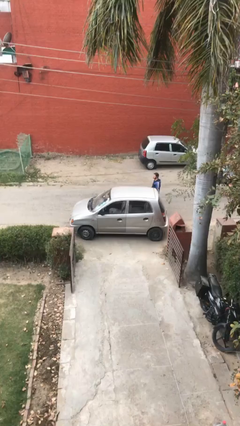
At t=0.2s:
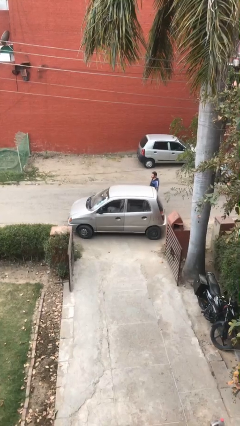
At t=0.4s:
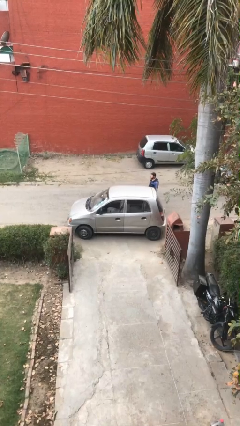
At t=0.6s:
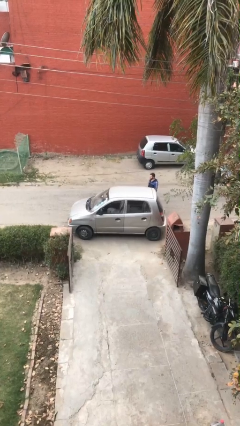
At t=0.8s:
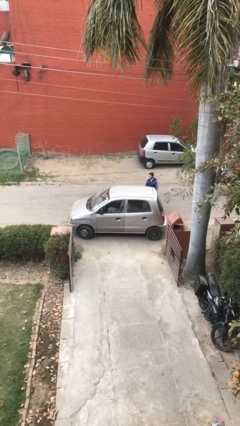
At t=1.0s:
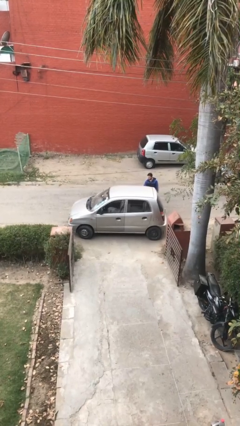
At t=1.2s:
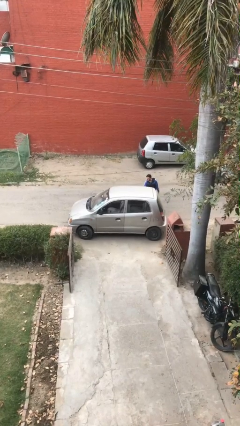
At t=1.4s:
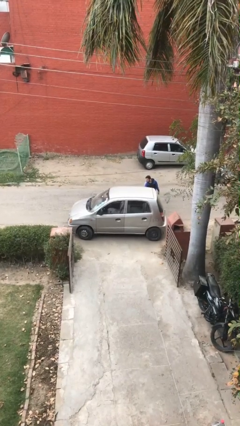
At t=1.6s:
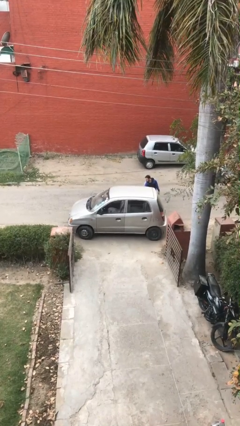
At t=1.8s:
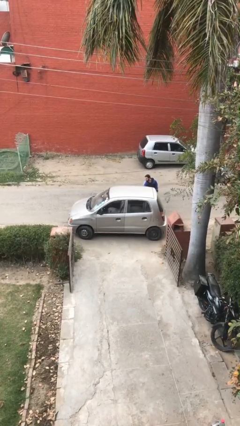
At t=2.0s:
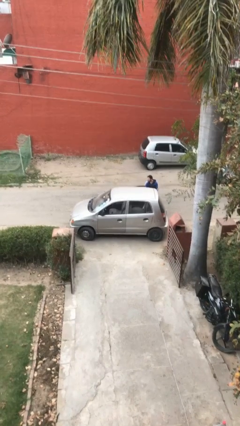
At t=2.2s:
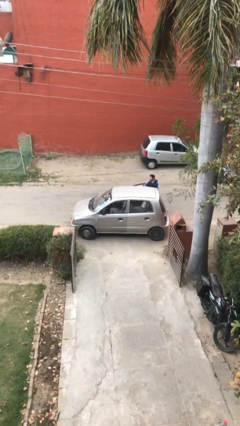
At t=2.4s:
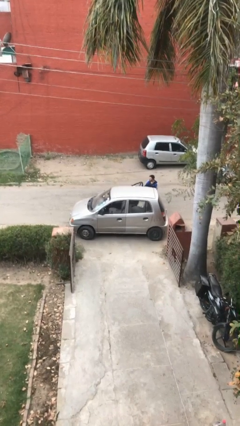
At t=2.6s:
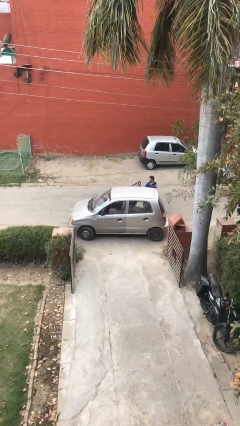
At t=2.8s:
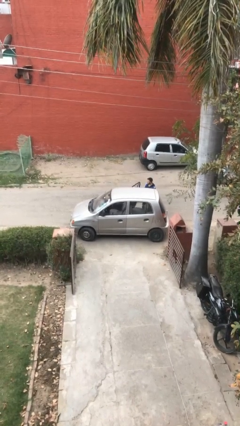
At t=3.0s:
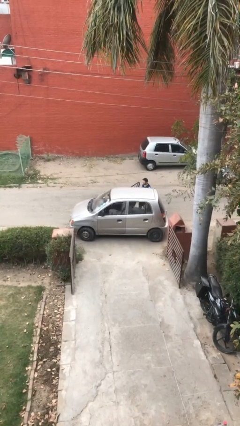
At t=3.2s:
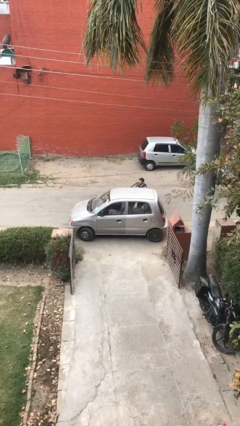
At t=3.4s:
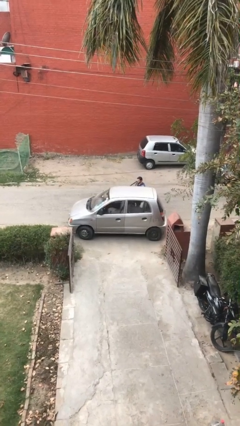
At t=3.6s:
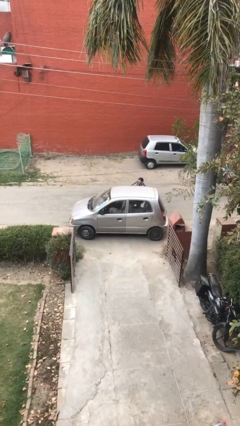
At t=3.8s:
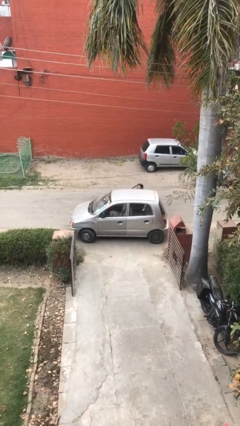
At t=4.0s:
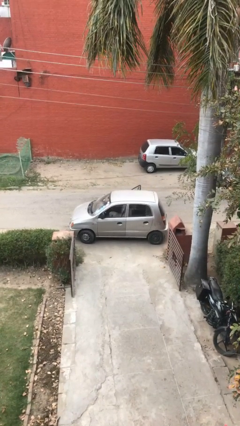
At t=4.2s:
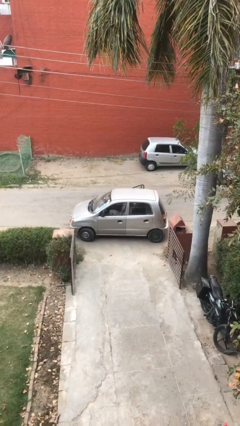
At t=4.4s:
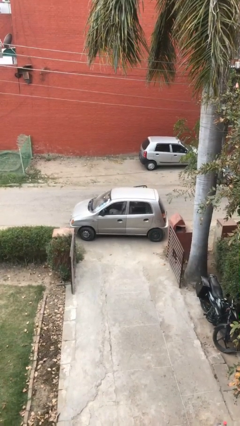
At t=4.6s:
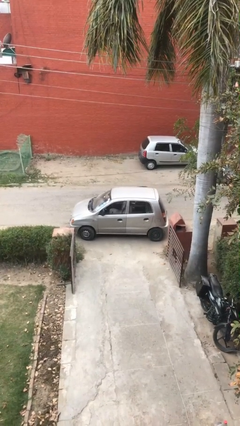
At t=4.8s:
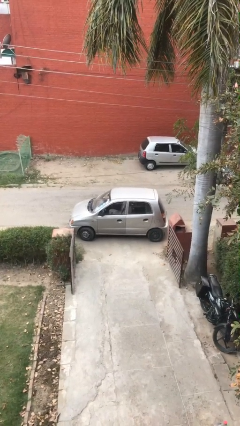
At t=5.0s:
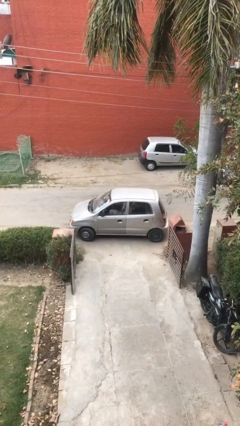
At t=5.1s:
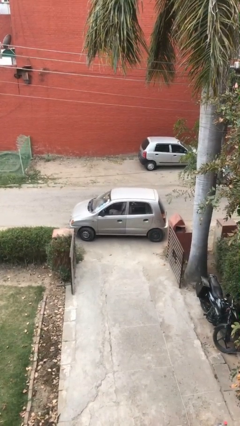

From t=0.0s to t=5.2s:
car picks up person

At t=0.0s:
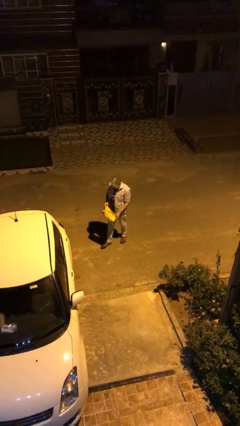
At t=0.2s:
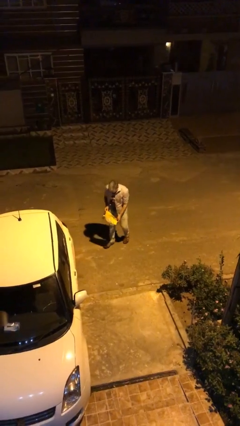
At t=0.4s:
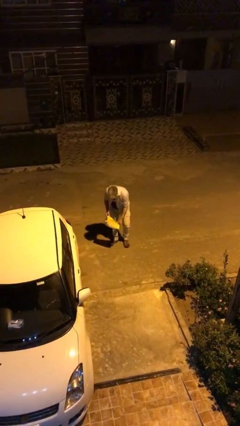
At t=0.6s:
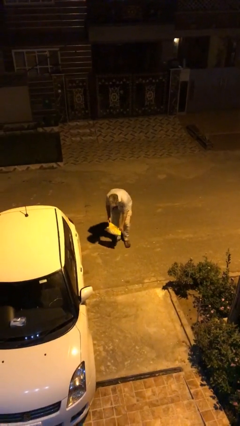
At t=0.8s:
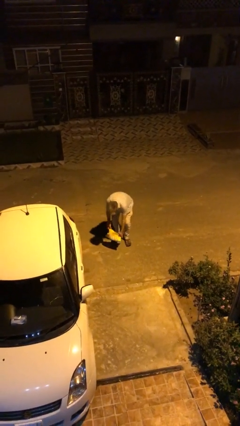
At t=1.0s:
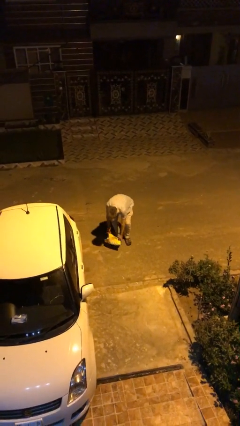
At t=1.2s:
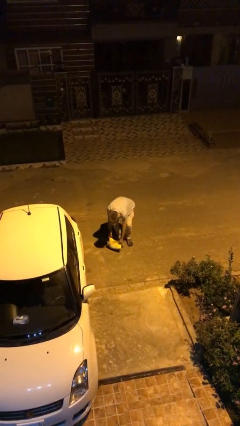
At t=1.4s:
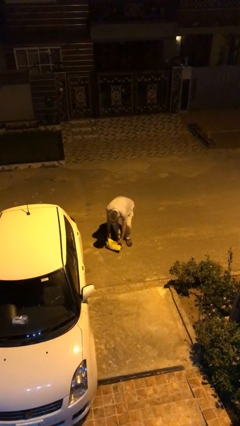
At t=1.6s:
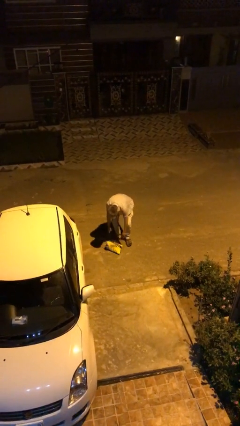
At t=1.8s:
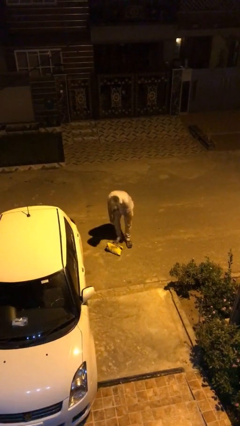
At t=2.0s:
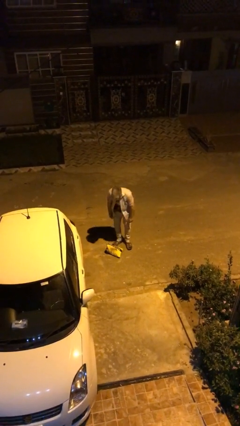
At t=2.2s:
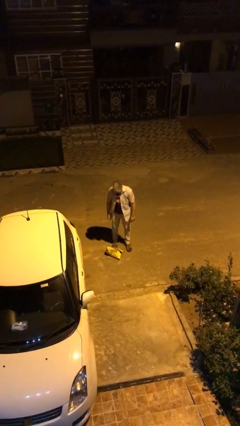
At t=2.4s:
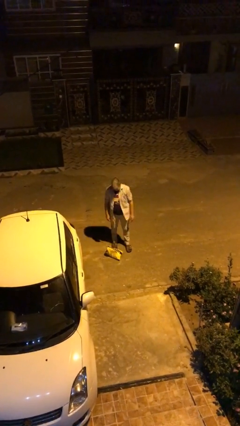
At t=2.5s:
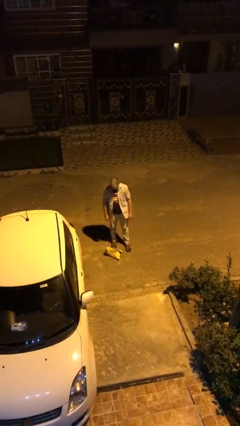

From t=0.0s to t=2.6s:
person puts down object on floor

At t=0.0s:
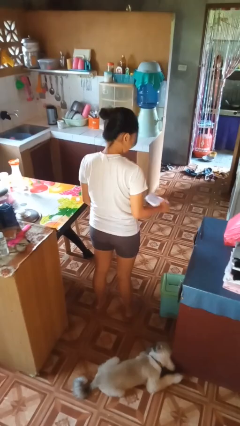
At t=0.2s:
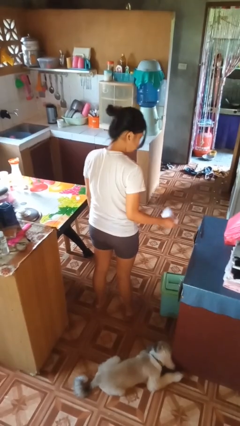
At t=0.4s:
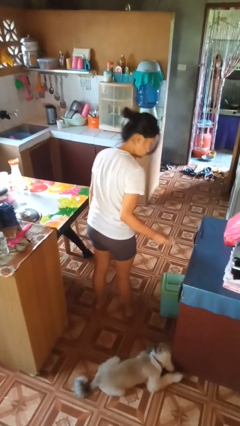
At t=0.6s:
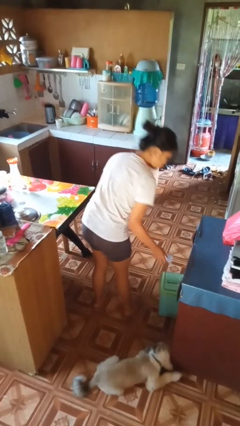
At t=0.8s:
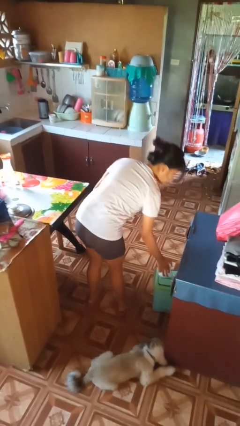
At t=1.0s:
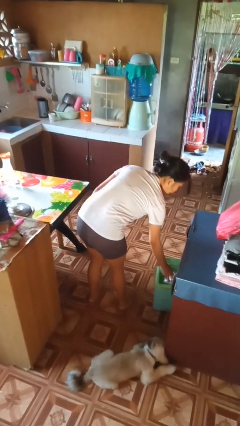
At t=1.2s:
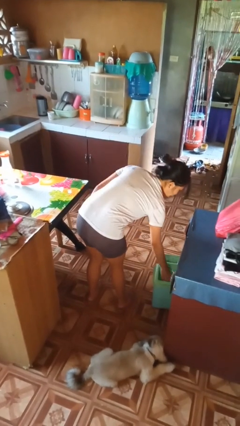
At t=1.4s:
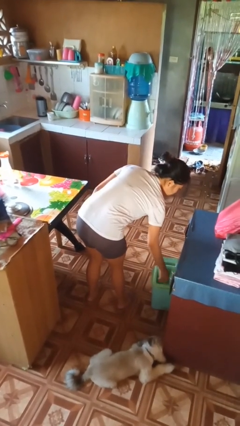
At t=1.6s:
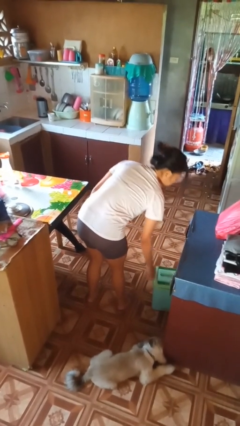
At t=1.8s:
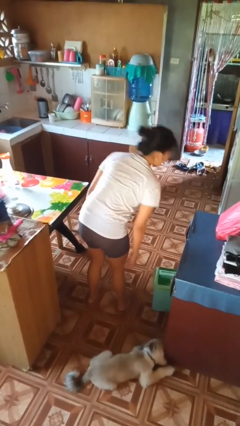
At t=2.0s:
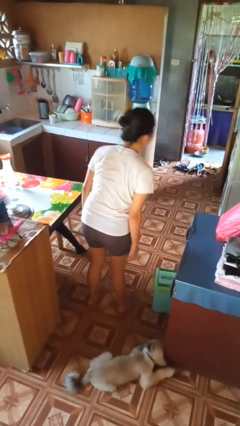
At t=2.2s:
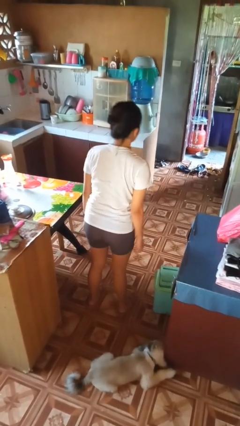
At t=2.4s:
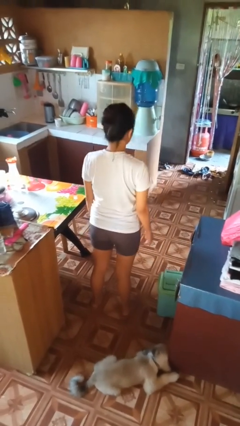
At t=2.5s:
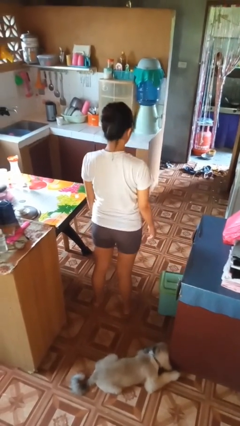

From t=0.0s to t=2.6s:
person discards trash

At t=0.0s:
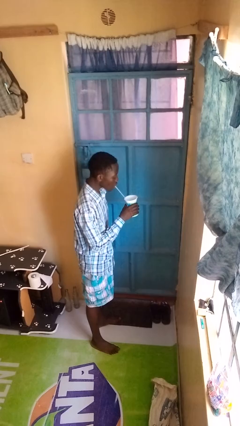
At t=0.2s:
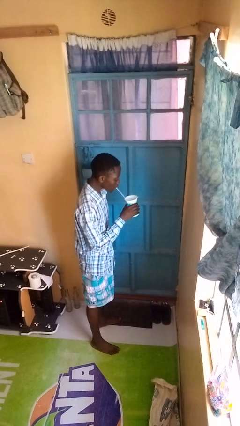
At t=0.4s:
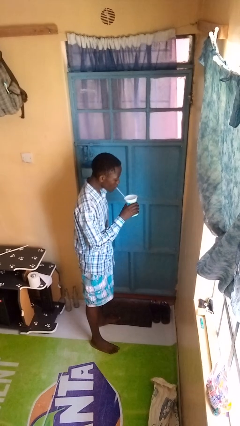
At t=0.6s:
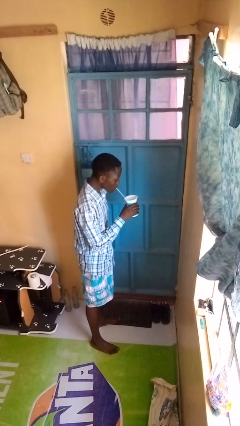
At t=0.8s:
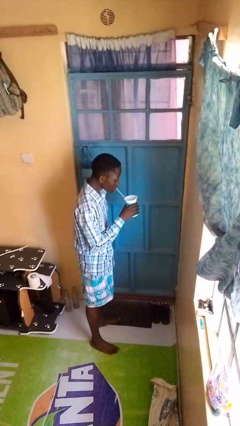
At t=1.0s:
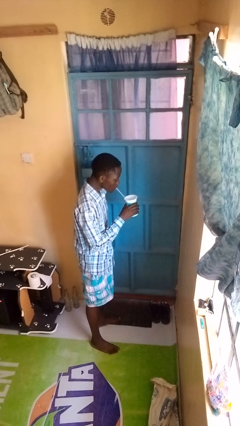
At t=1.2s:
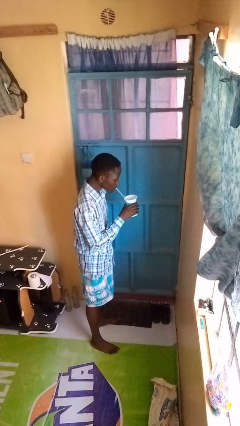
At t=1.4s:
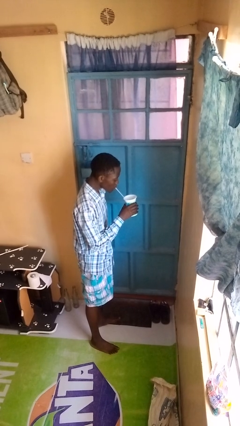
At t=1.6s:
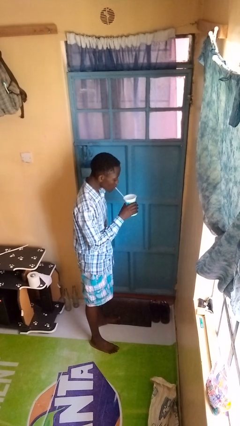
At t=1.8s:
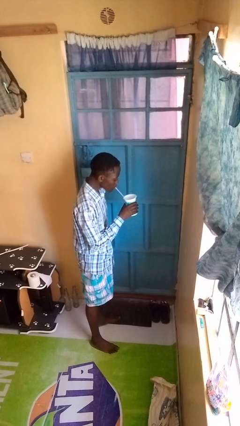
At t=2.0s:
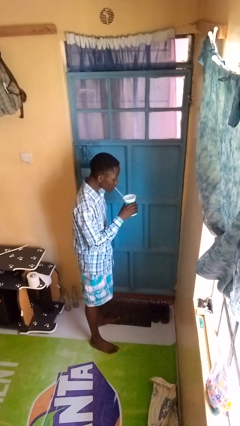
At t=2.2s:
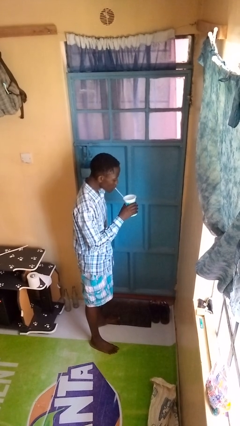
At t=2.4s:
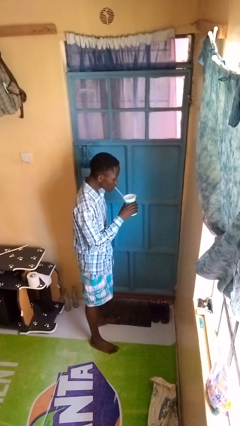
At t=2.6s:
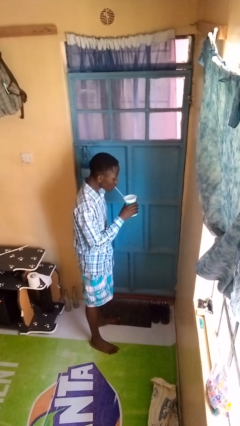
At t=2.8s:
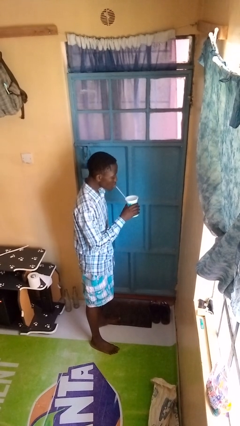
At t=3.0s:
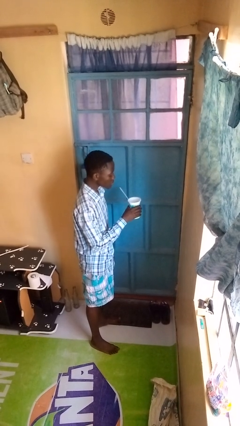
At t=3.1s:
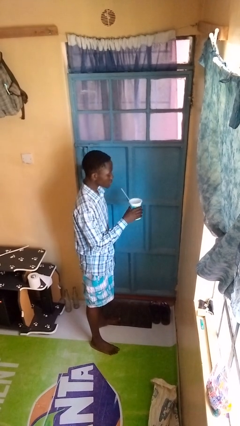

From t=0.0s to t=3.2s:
person drinks from straw

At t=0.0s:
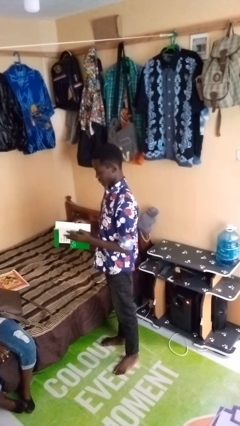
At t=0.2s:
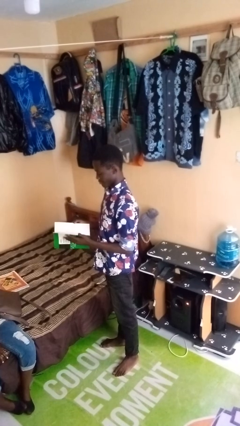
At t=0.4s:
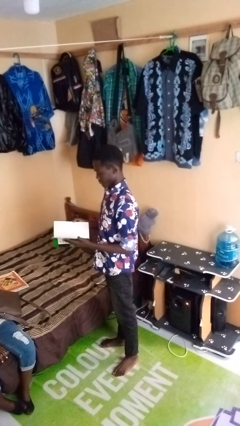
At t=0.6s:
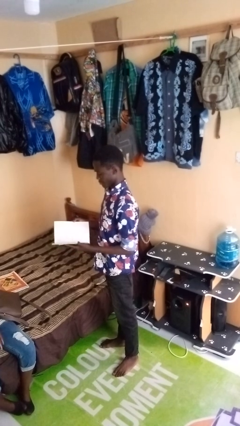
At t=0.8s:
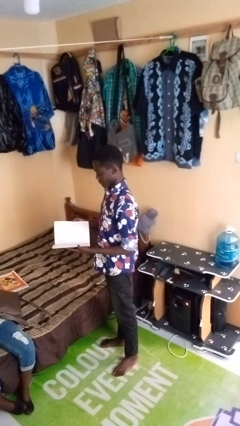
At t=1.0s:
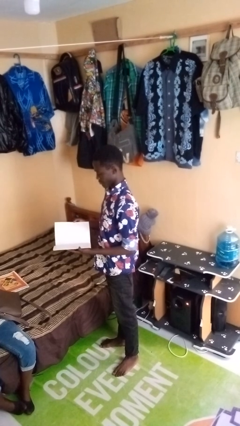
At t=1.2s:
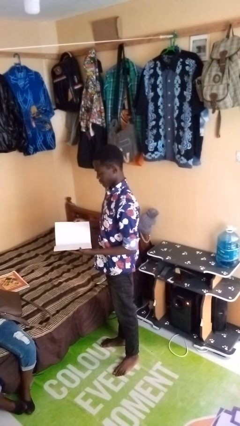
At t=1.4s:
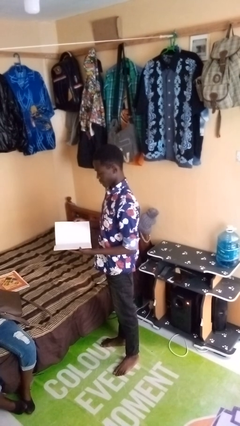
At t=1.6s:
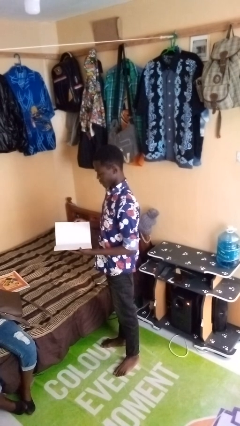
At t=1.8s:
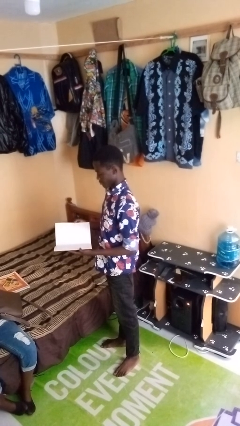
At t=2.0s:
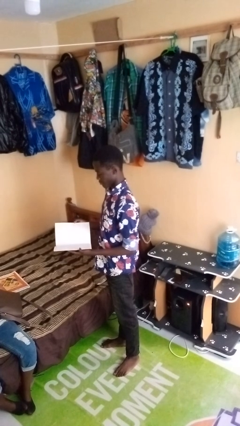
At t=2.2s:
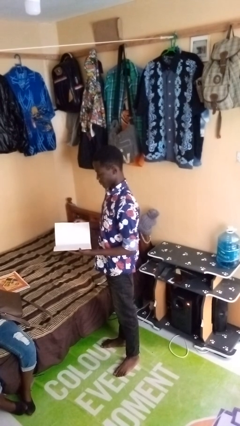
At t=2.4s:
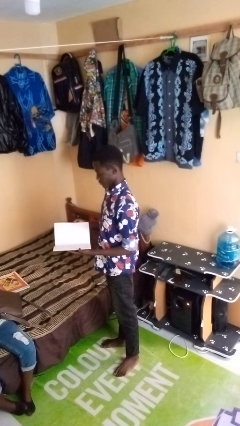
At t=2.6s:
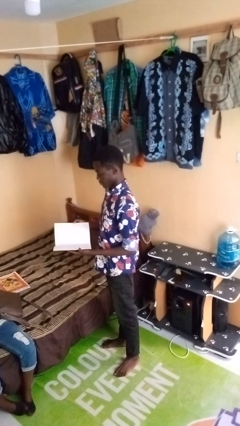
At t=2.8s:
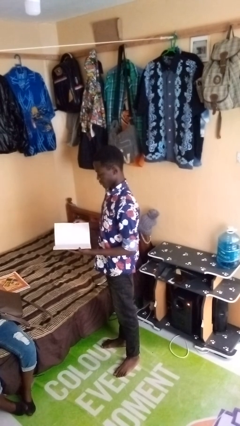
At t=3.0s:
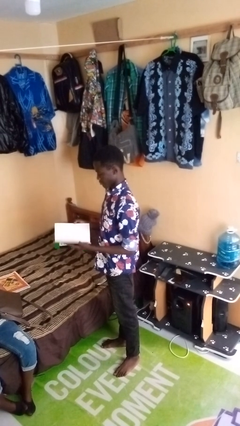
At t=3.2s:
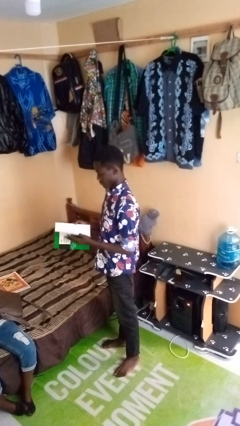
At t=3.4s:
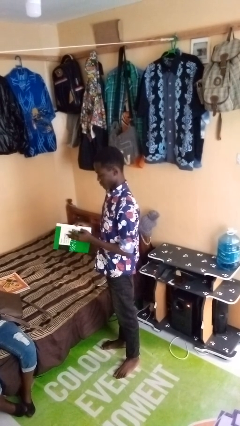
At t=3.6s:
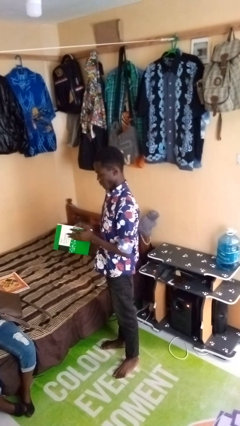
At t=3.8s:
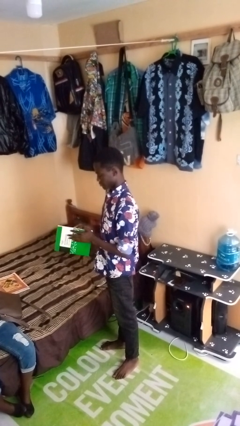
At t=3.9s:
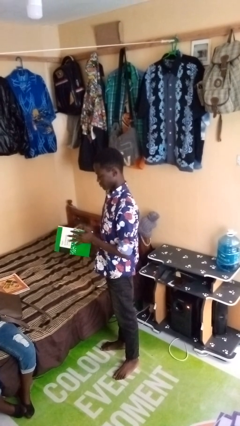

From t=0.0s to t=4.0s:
person reads magazine
